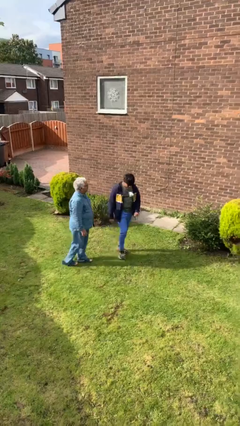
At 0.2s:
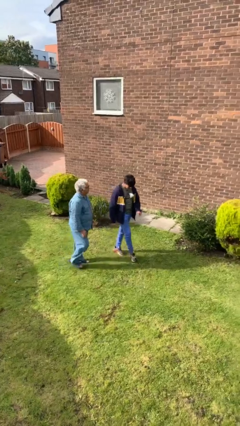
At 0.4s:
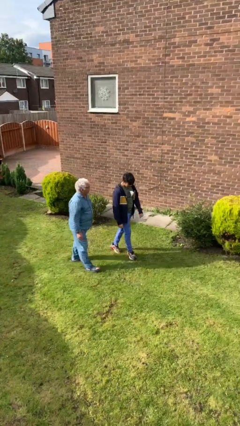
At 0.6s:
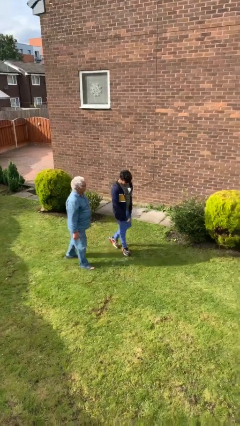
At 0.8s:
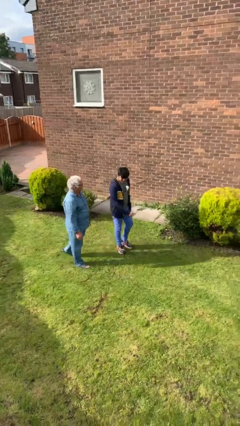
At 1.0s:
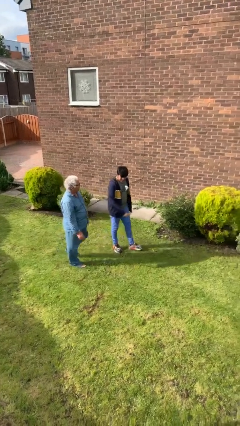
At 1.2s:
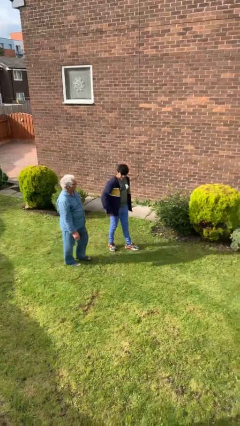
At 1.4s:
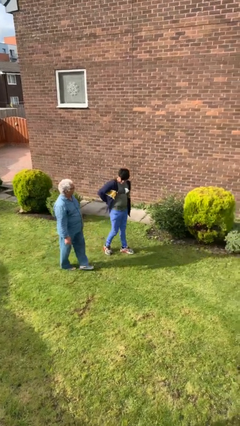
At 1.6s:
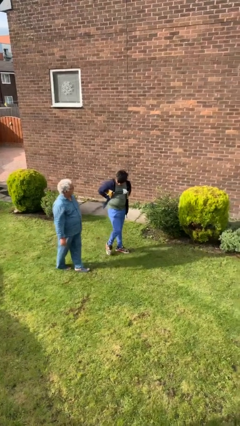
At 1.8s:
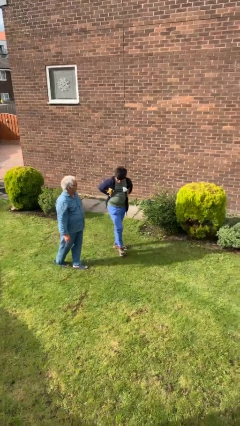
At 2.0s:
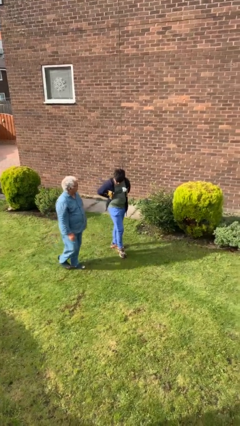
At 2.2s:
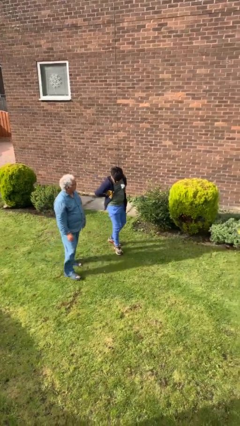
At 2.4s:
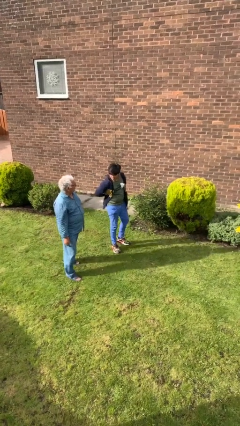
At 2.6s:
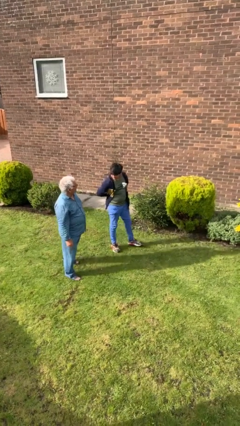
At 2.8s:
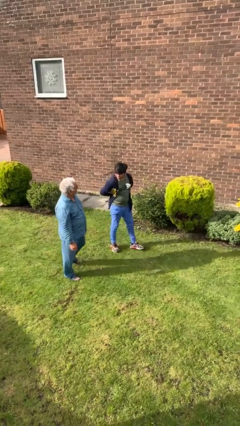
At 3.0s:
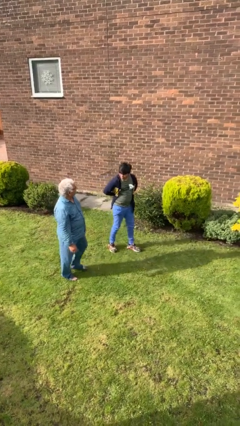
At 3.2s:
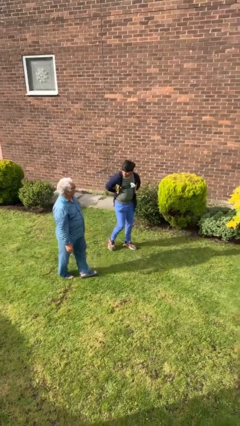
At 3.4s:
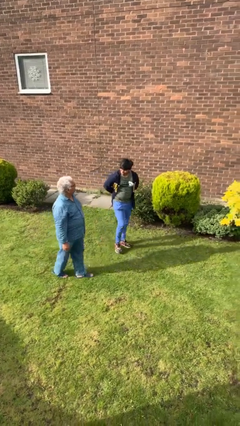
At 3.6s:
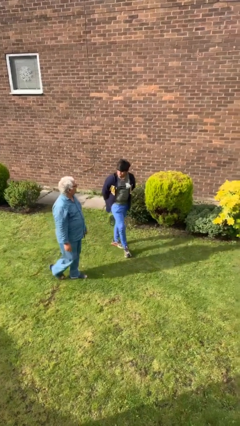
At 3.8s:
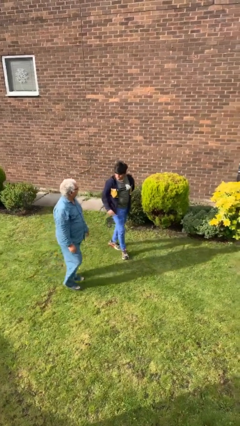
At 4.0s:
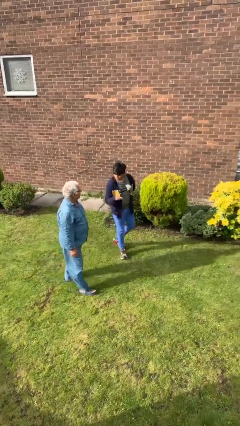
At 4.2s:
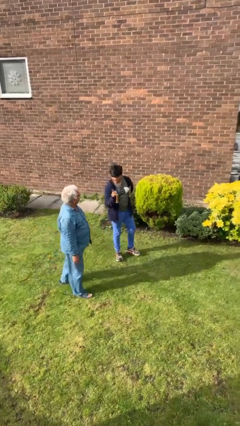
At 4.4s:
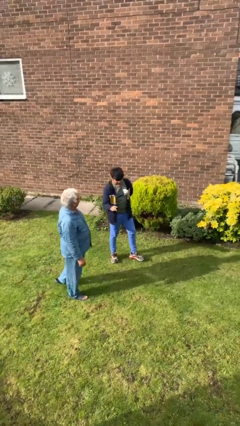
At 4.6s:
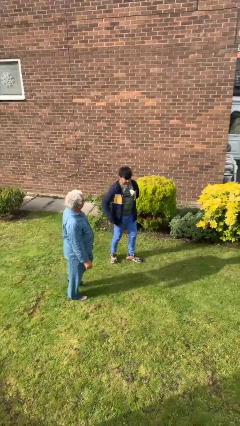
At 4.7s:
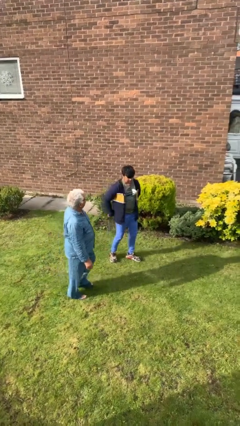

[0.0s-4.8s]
person talks to person

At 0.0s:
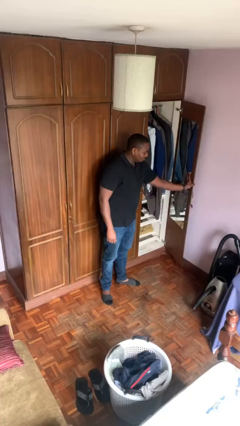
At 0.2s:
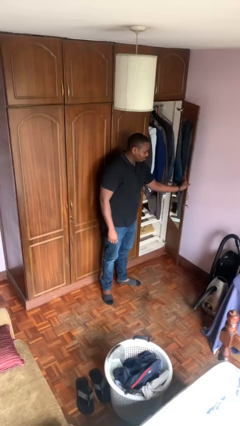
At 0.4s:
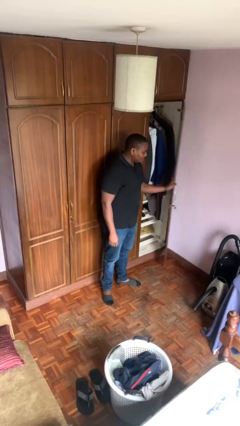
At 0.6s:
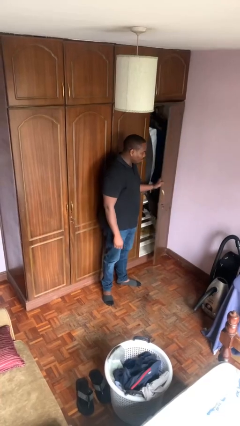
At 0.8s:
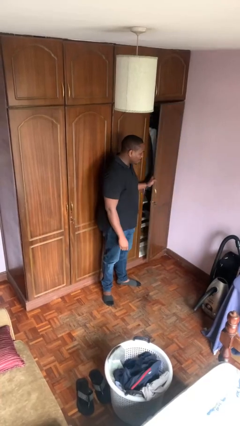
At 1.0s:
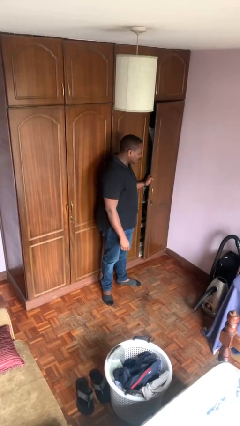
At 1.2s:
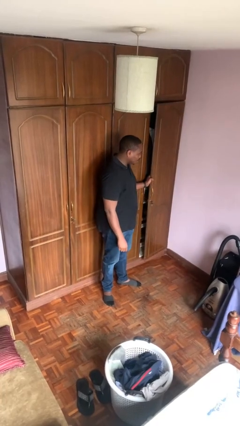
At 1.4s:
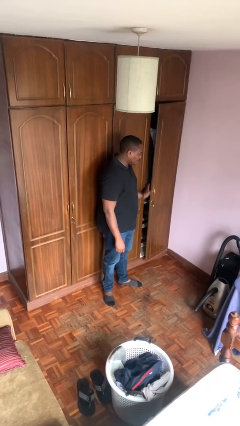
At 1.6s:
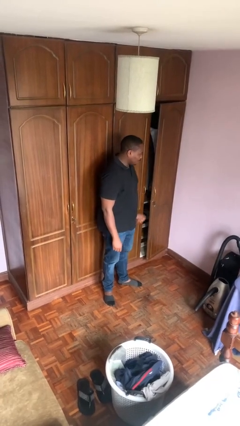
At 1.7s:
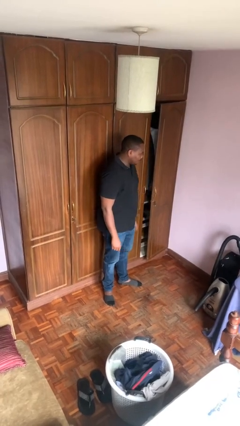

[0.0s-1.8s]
person closes closet door

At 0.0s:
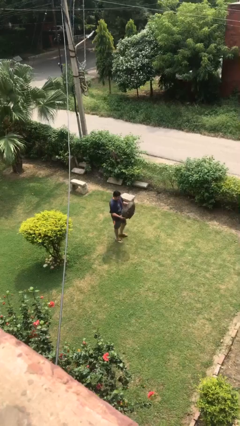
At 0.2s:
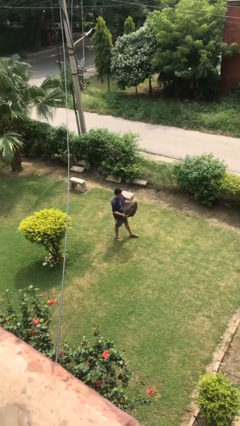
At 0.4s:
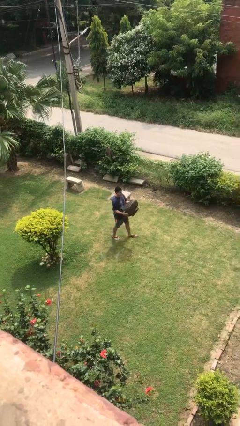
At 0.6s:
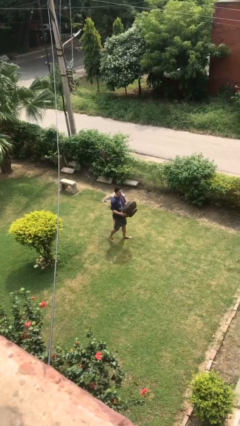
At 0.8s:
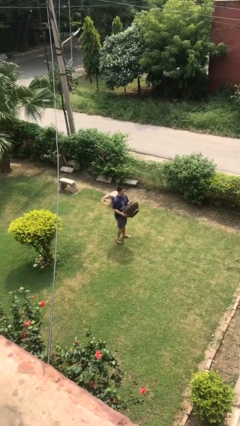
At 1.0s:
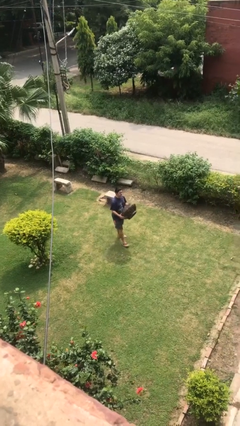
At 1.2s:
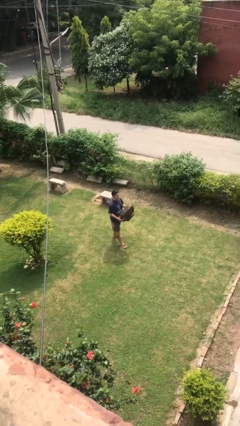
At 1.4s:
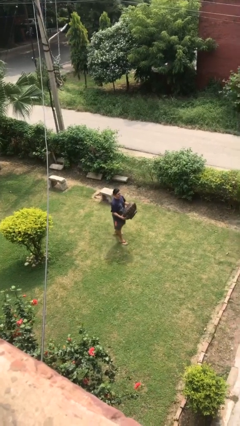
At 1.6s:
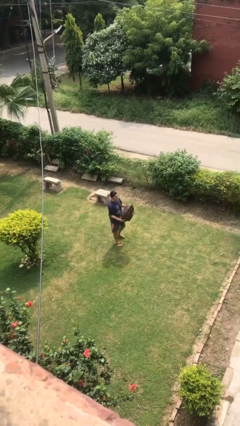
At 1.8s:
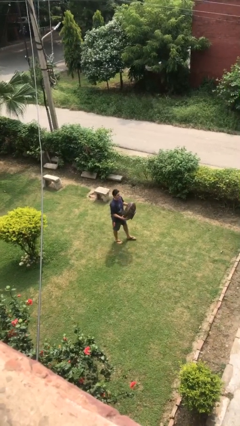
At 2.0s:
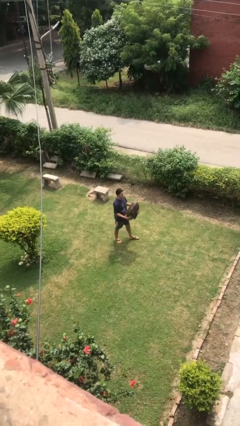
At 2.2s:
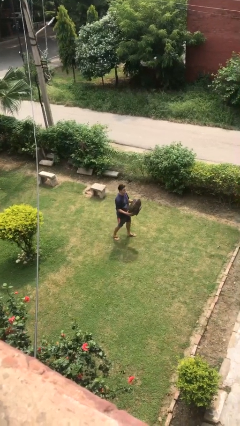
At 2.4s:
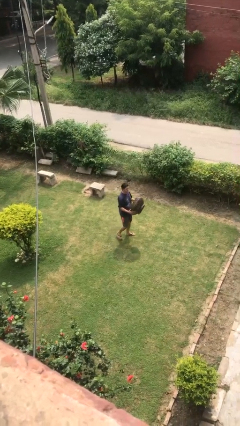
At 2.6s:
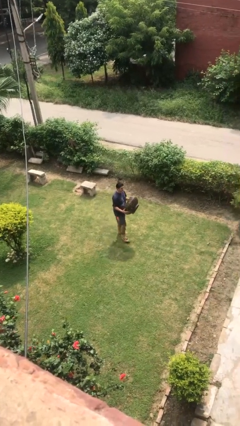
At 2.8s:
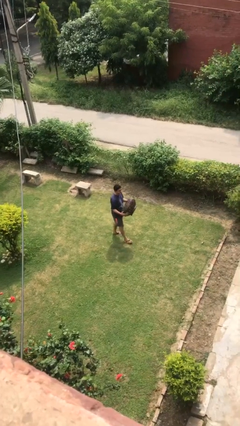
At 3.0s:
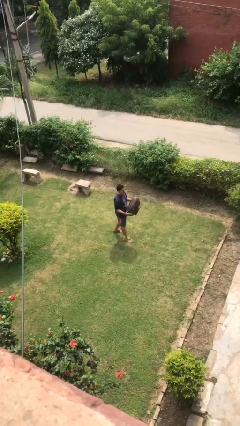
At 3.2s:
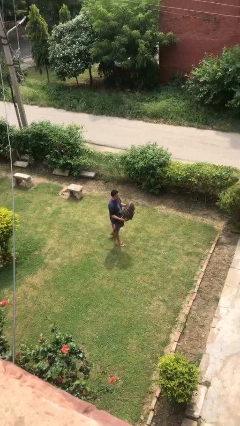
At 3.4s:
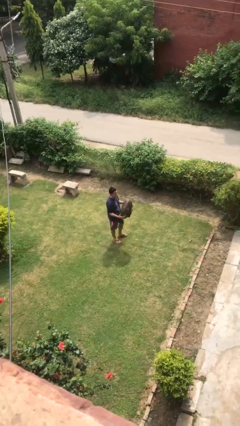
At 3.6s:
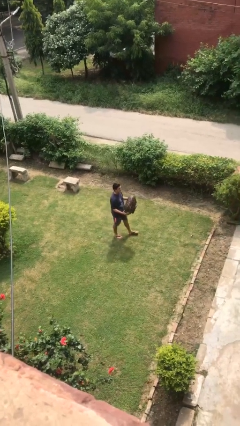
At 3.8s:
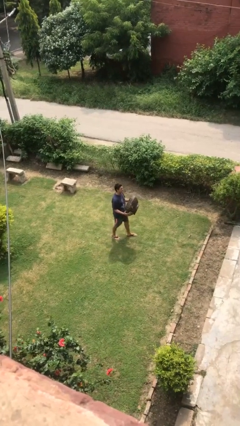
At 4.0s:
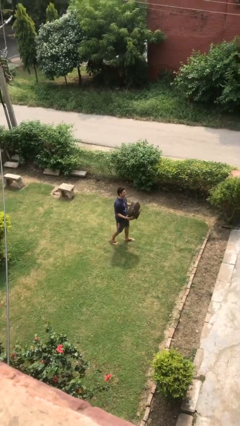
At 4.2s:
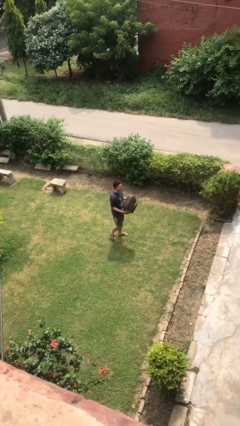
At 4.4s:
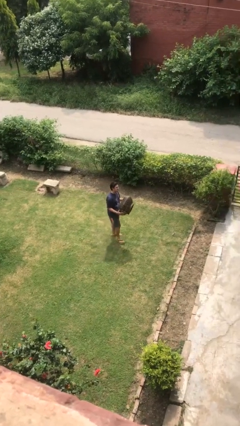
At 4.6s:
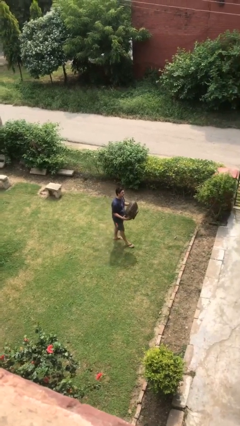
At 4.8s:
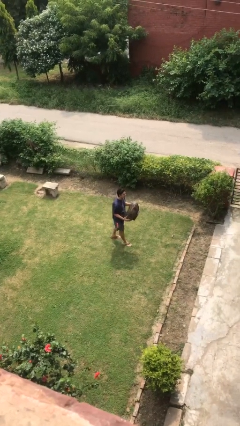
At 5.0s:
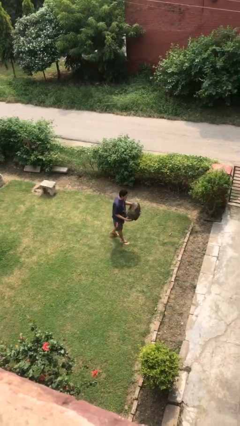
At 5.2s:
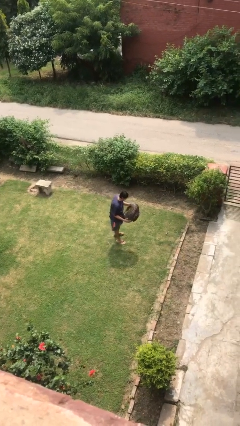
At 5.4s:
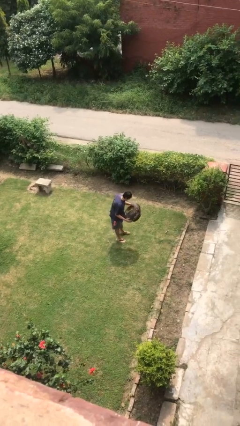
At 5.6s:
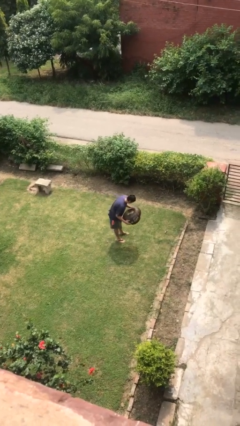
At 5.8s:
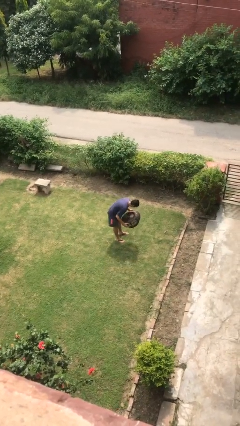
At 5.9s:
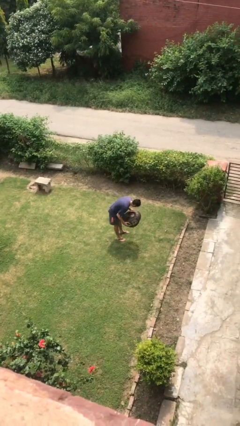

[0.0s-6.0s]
person carries heavy object

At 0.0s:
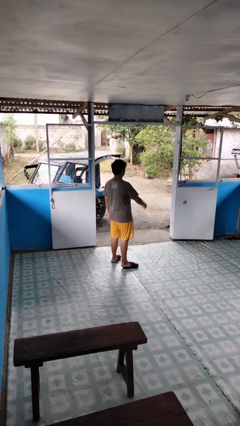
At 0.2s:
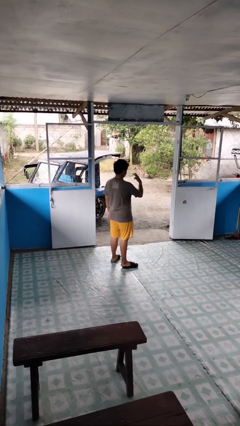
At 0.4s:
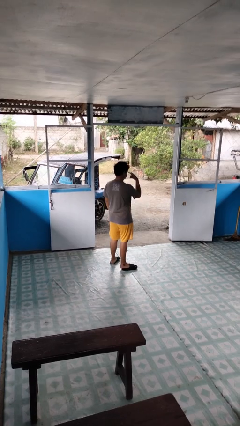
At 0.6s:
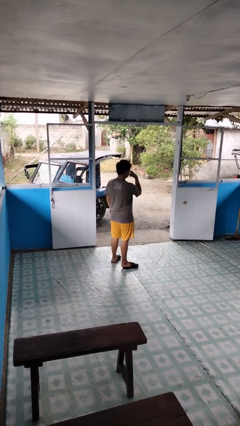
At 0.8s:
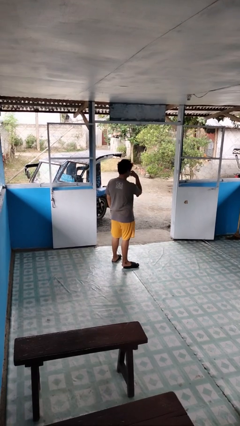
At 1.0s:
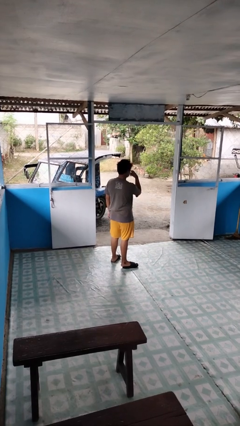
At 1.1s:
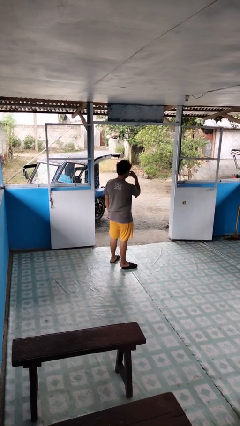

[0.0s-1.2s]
person gestures watch closely

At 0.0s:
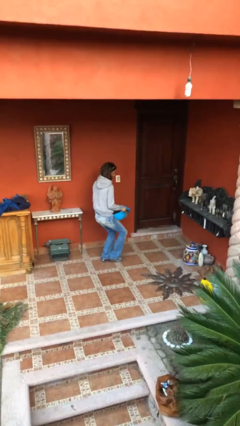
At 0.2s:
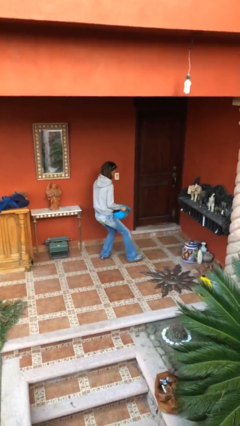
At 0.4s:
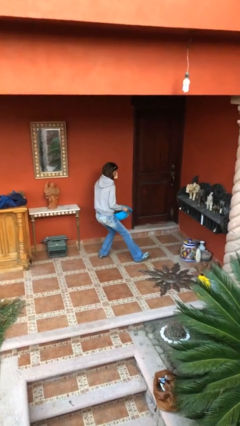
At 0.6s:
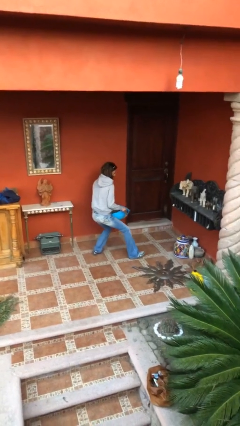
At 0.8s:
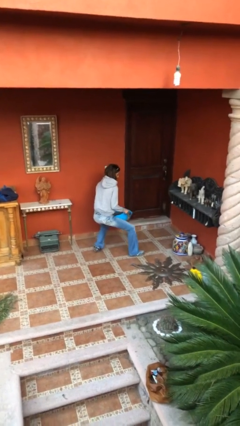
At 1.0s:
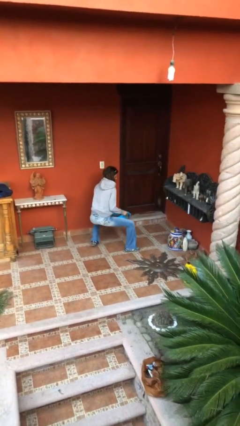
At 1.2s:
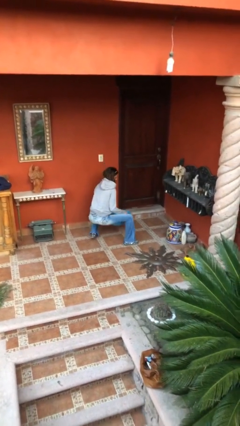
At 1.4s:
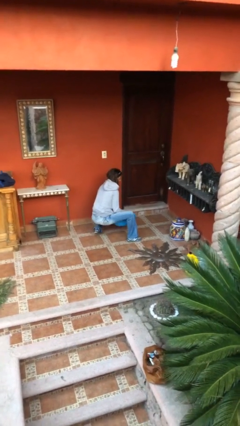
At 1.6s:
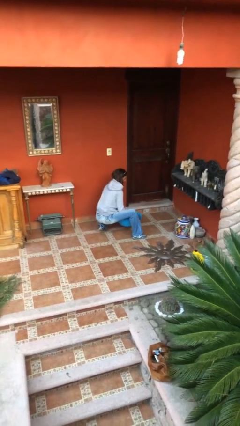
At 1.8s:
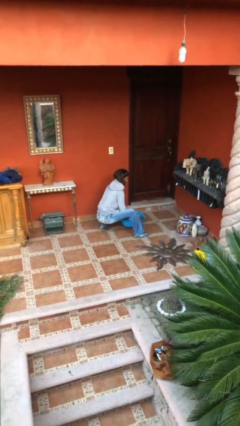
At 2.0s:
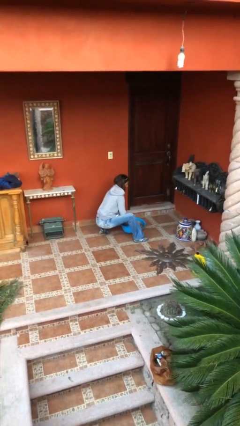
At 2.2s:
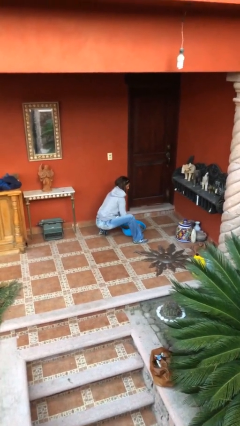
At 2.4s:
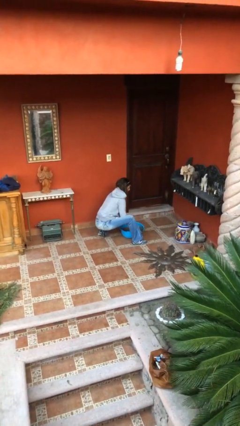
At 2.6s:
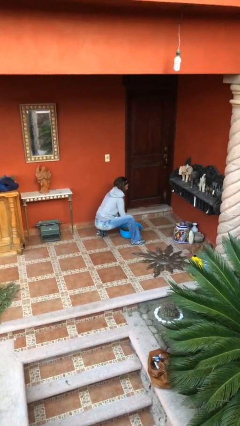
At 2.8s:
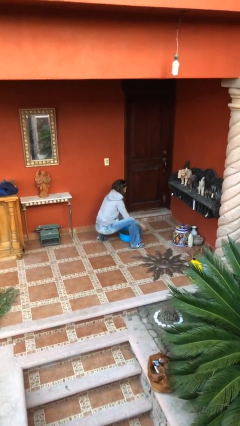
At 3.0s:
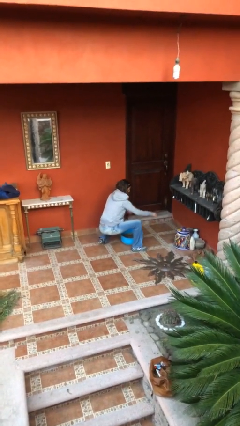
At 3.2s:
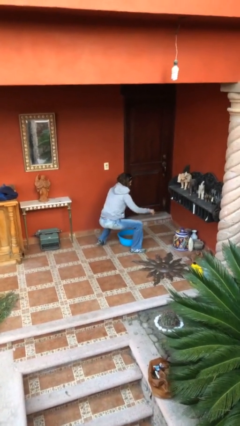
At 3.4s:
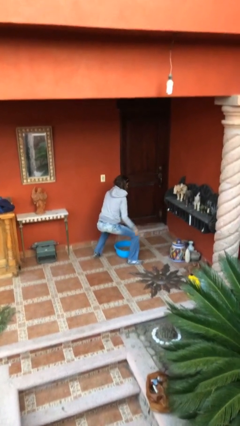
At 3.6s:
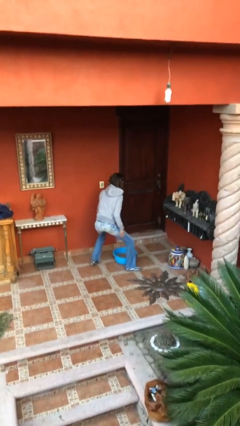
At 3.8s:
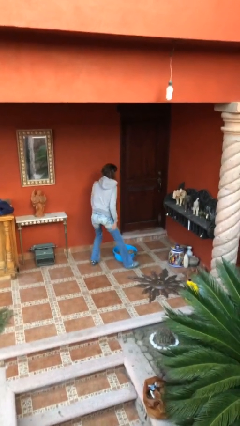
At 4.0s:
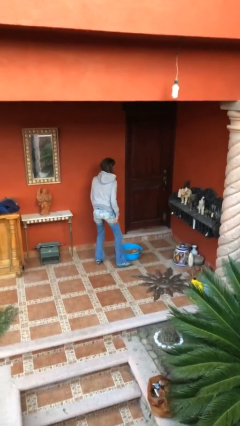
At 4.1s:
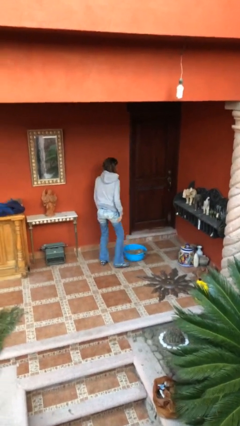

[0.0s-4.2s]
person puts down object on floor
